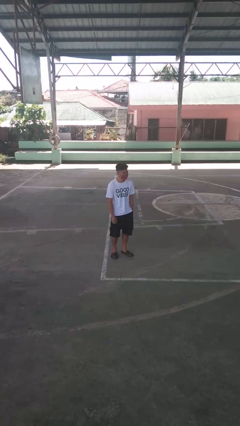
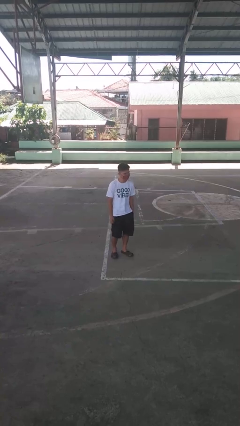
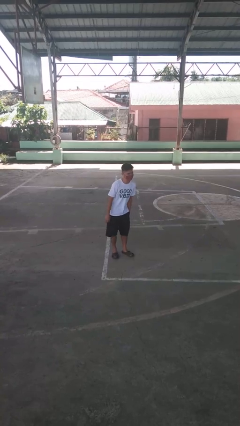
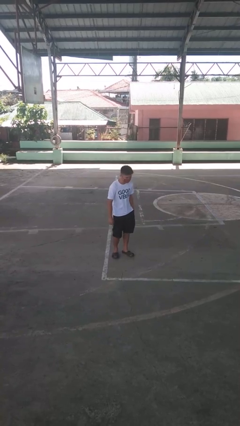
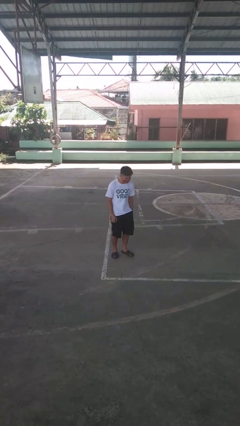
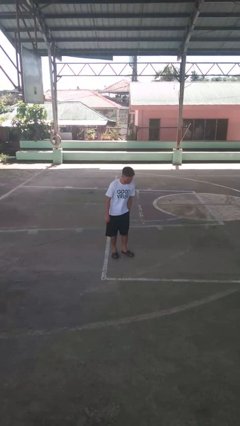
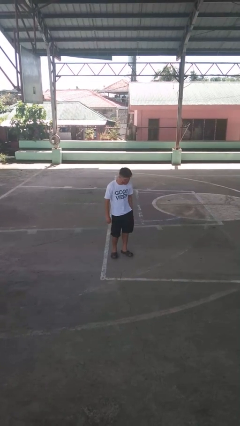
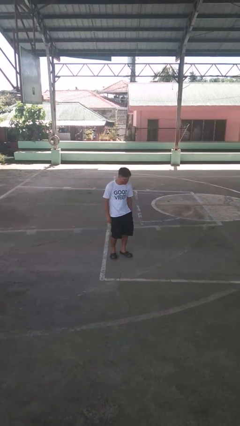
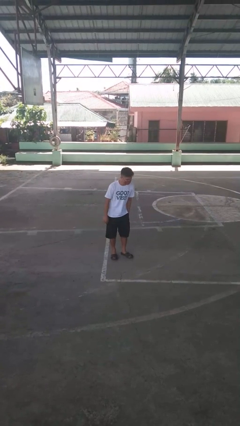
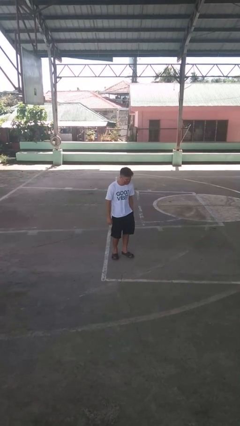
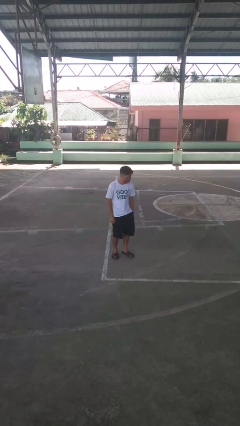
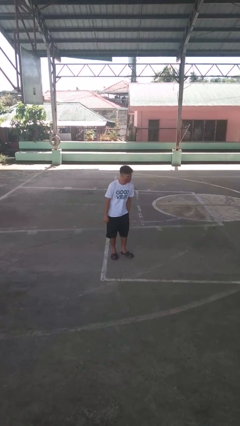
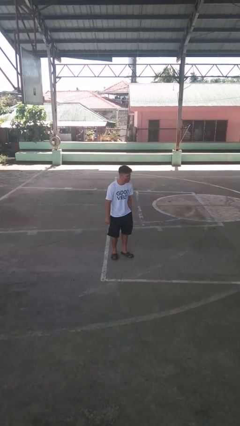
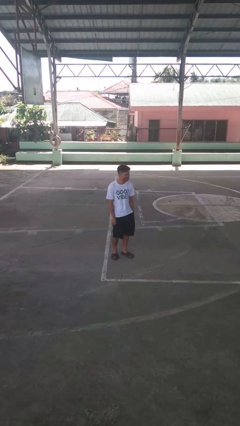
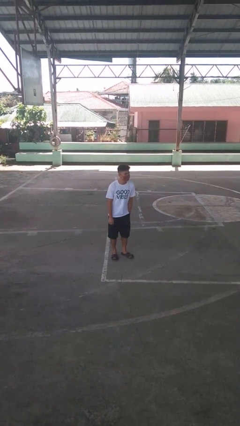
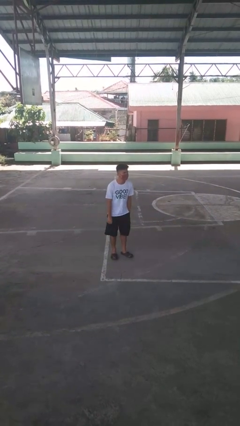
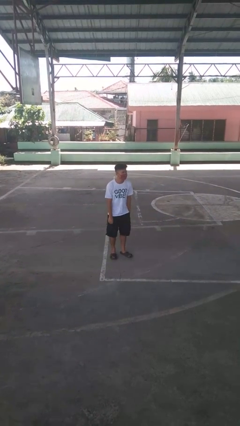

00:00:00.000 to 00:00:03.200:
person wiggles hips

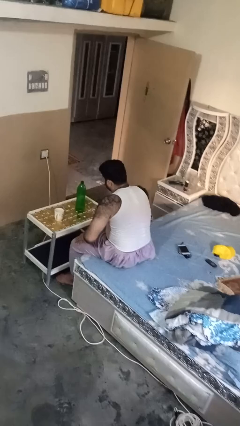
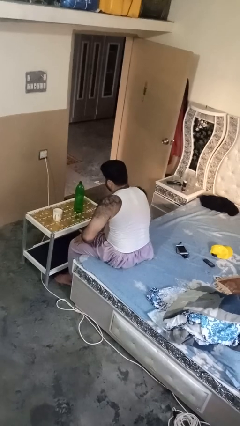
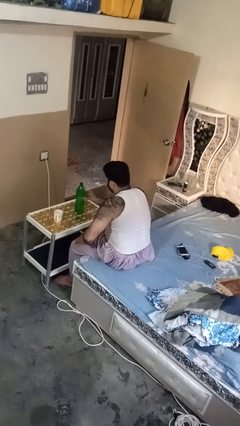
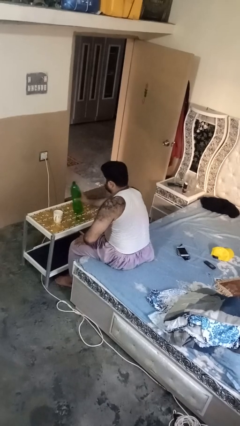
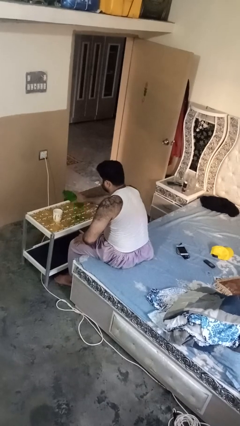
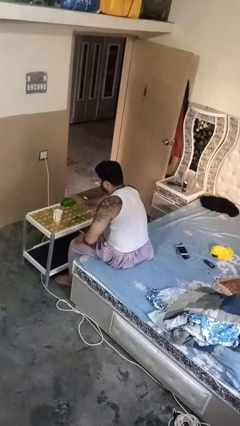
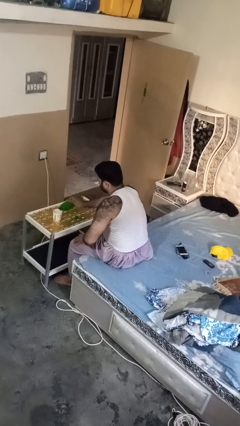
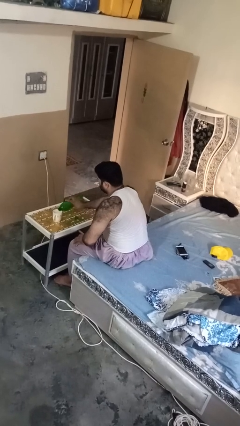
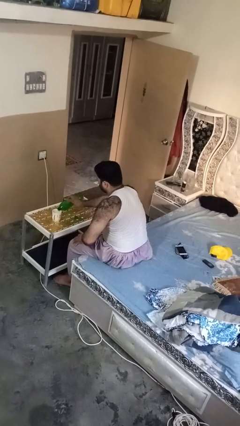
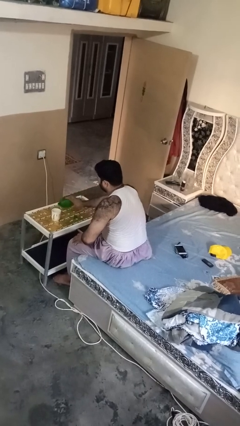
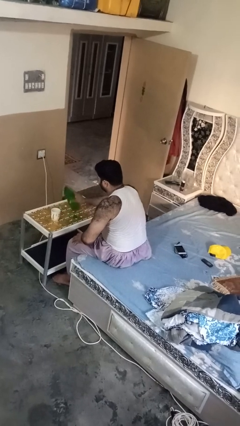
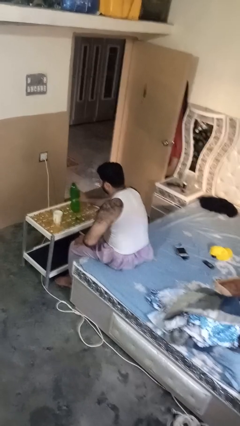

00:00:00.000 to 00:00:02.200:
person pours liquid into cup

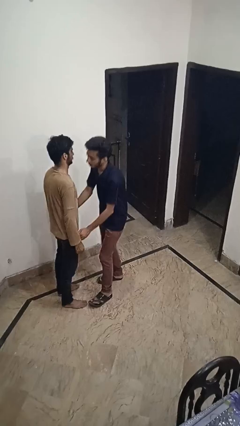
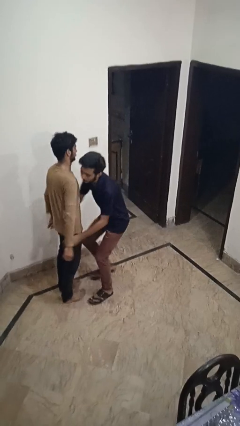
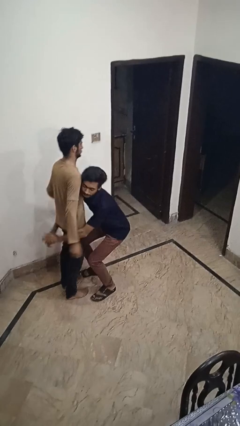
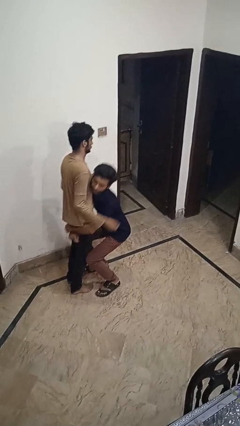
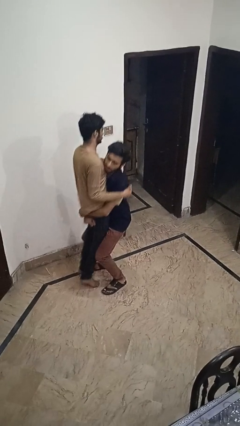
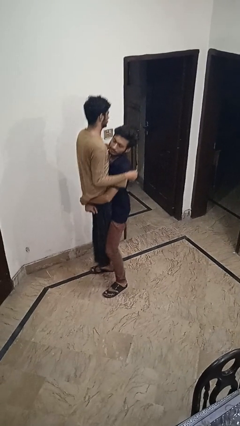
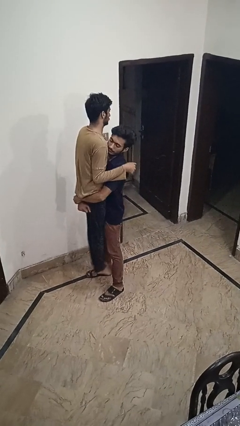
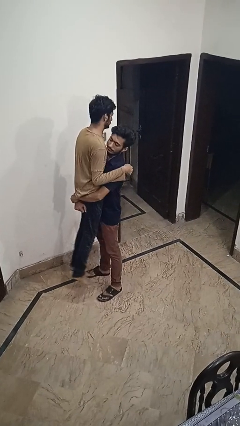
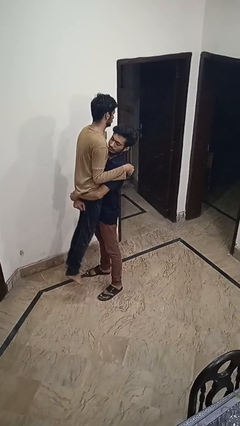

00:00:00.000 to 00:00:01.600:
person picks up person

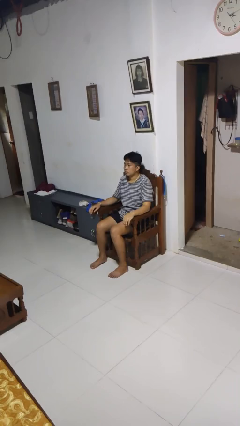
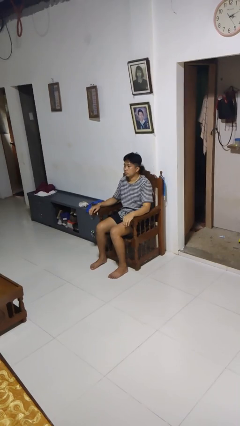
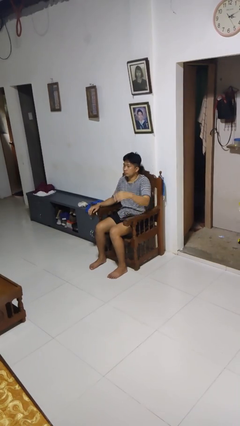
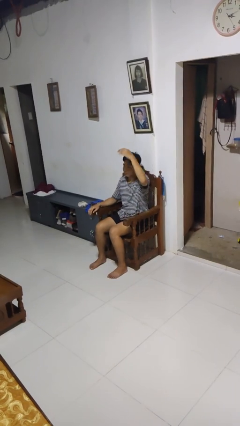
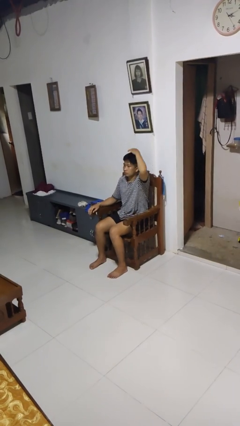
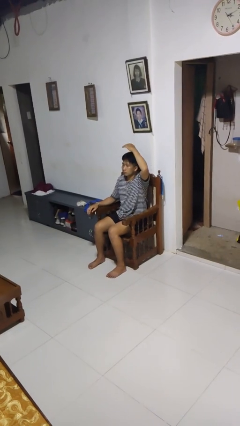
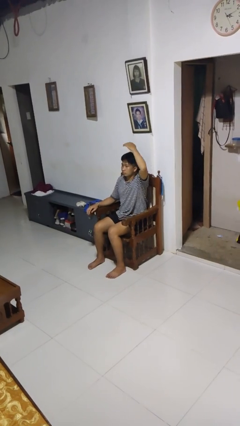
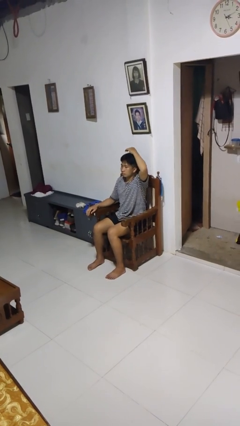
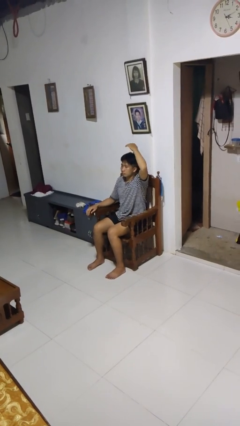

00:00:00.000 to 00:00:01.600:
person pats head

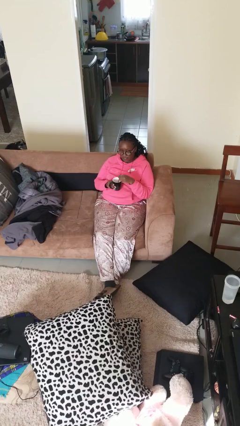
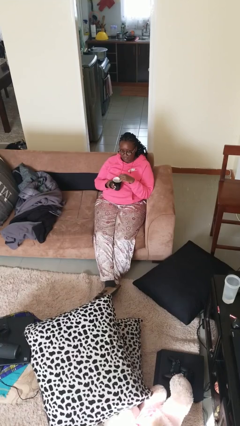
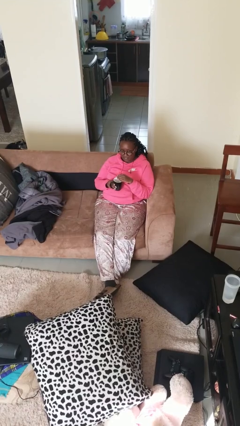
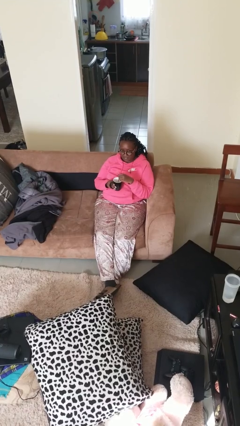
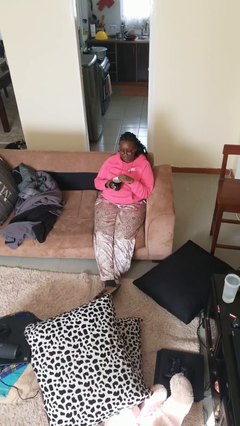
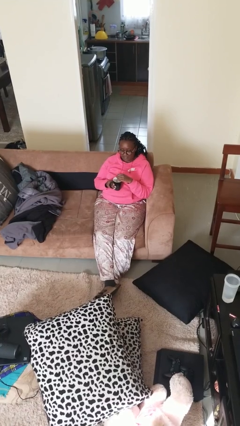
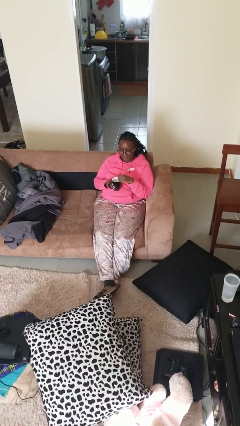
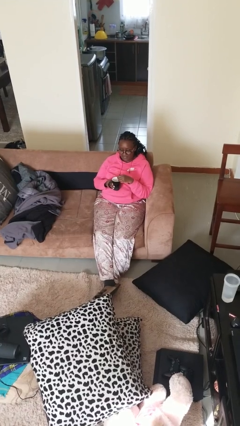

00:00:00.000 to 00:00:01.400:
person stirs mug

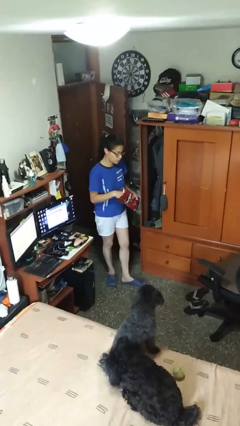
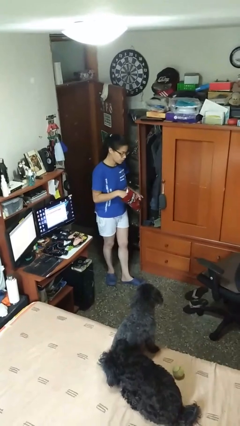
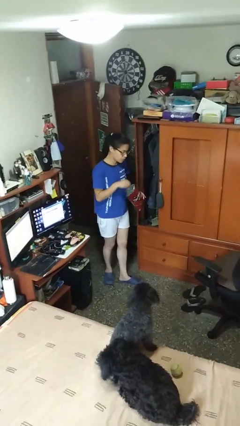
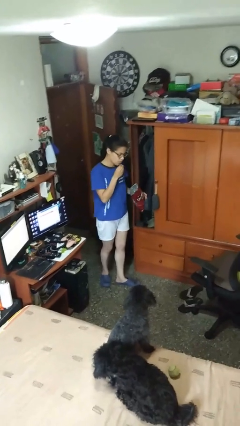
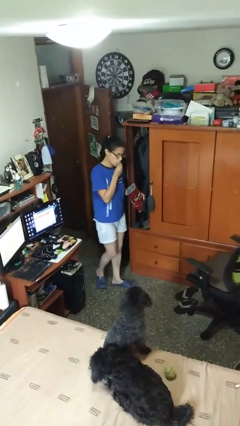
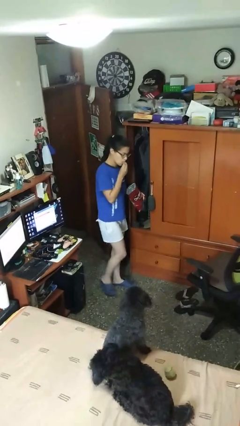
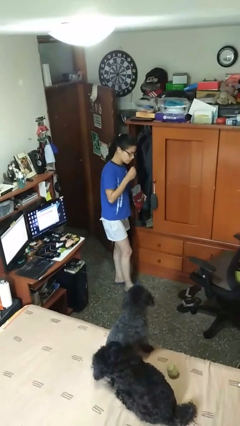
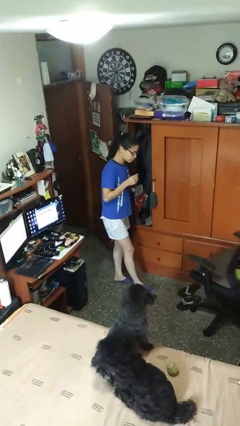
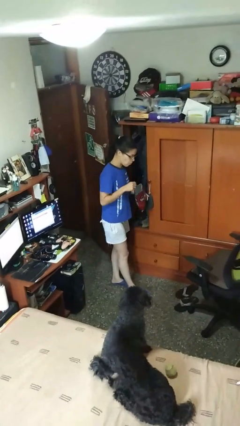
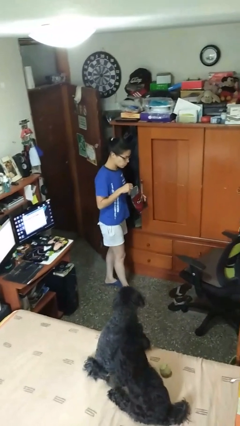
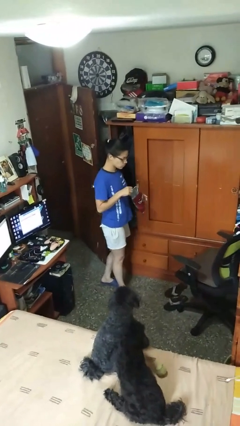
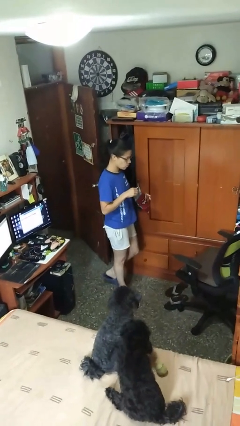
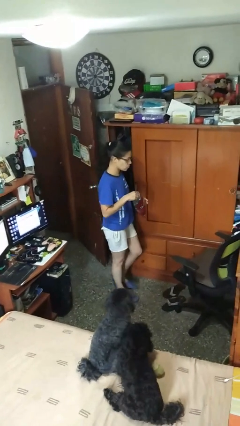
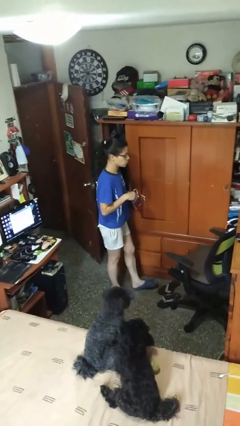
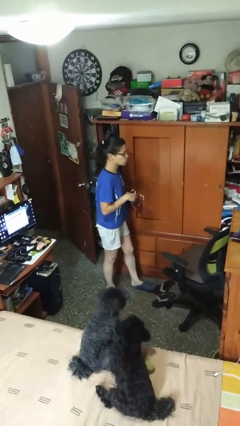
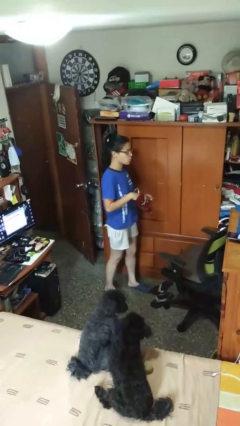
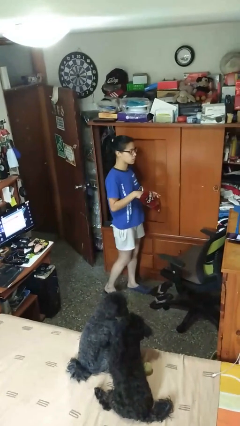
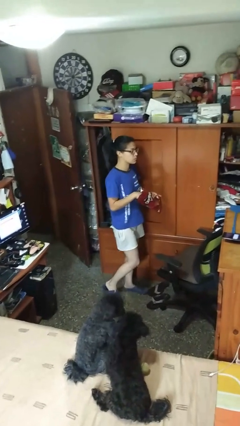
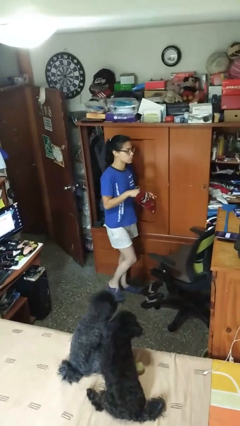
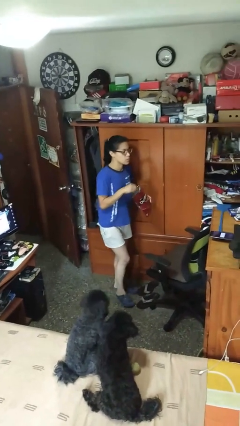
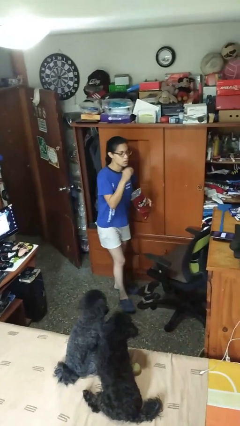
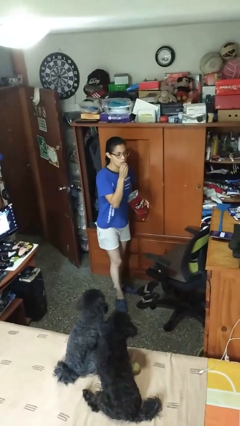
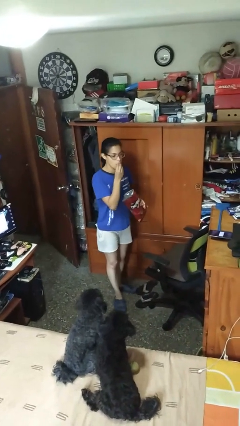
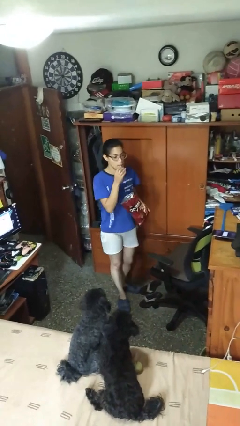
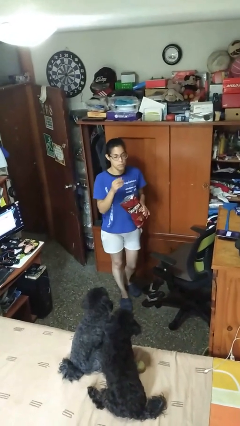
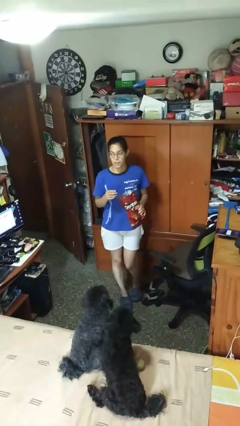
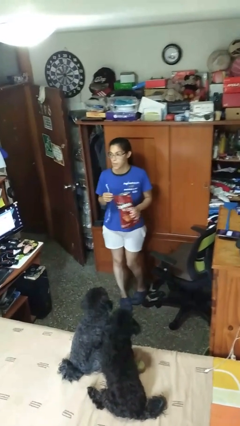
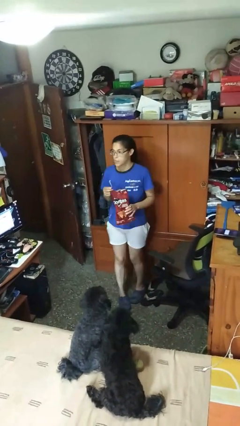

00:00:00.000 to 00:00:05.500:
person eats snack from bag

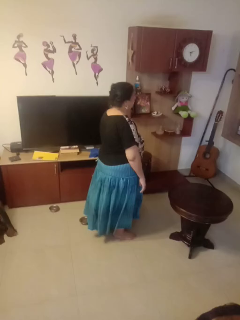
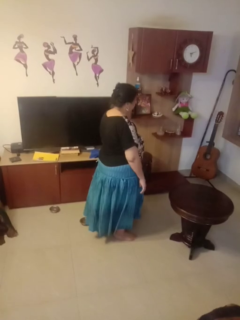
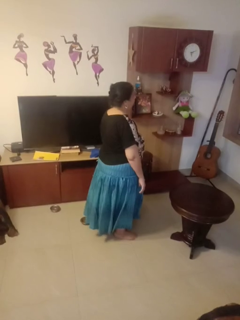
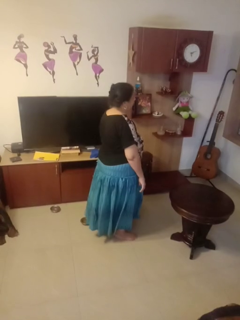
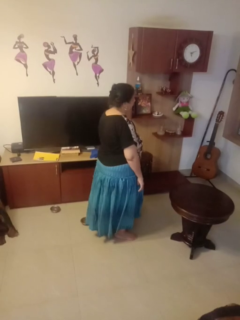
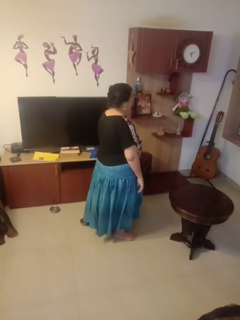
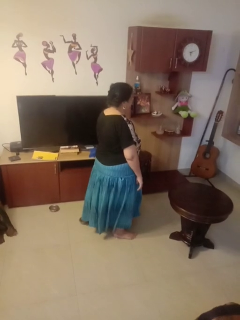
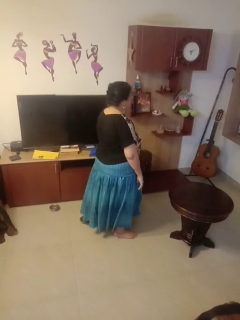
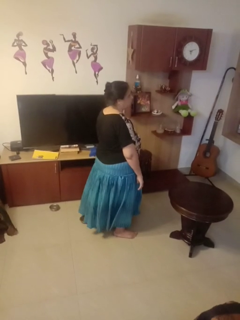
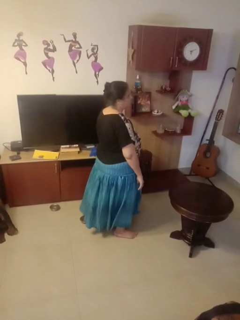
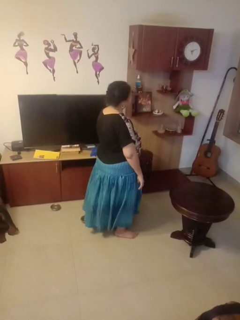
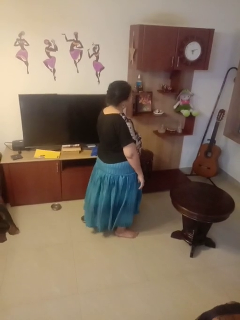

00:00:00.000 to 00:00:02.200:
person nods head

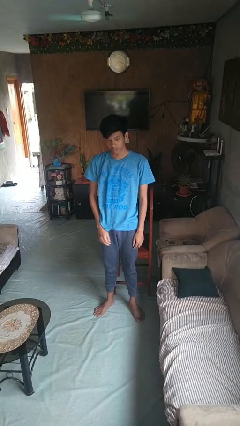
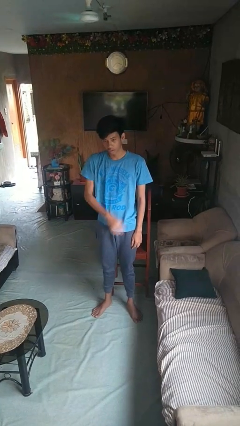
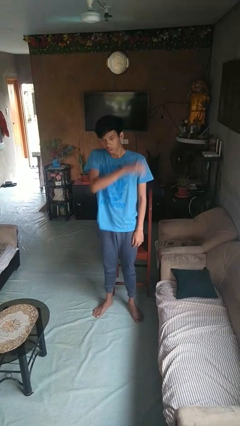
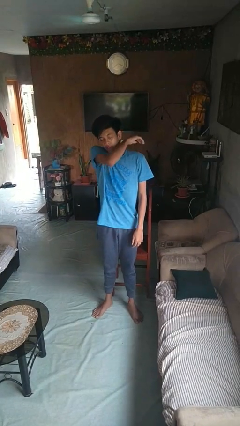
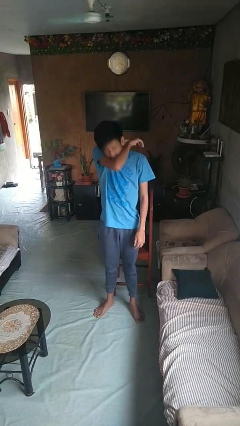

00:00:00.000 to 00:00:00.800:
person sneezes into arm
